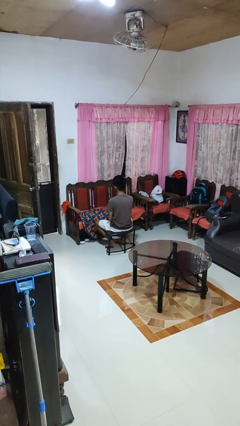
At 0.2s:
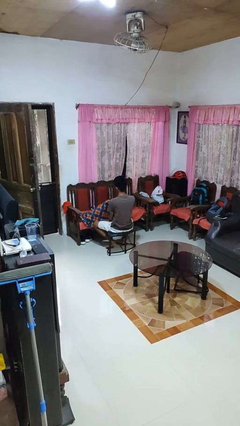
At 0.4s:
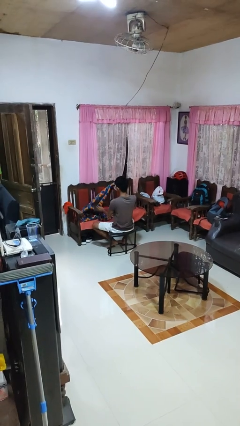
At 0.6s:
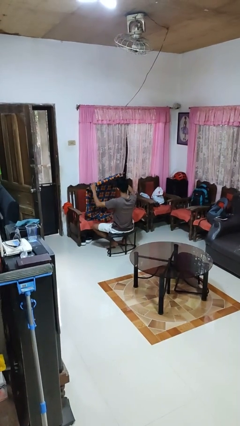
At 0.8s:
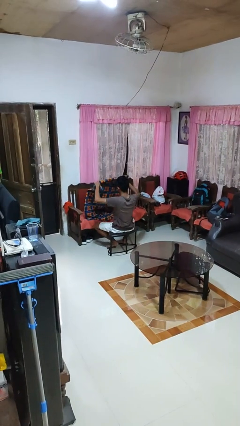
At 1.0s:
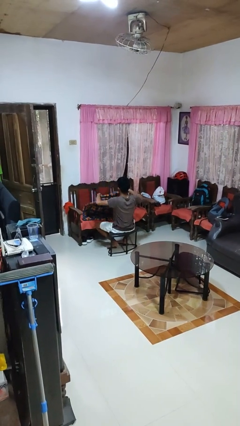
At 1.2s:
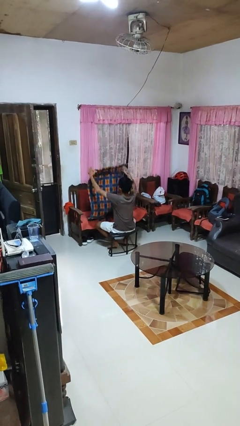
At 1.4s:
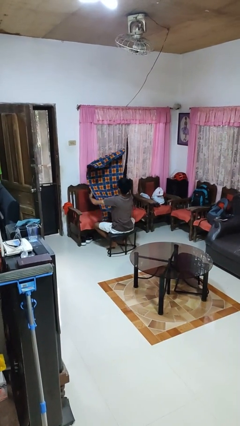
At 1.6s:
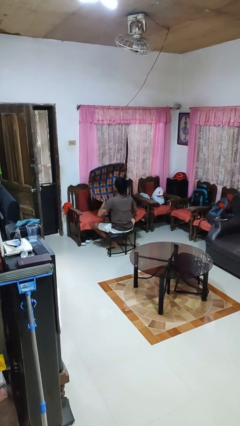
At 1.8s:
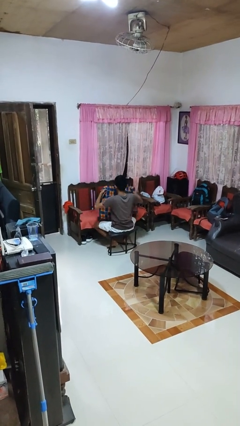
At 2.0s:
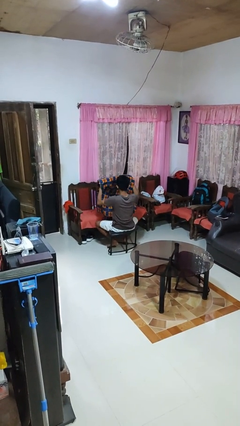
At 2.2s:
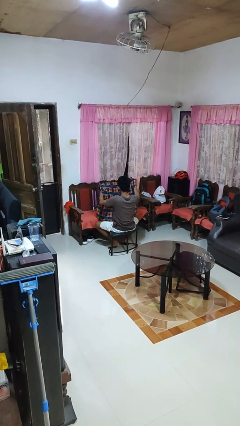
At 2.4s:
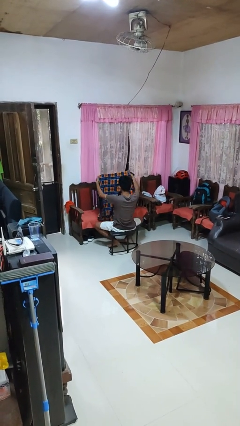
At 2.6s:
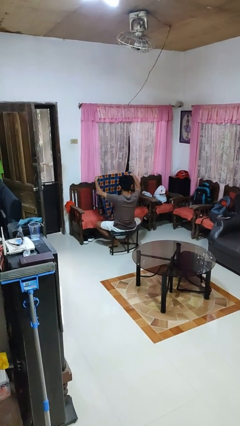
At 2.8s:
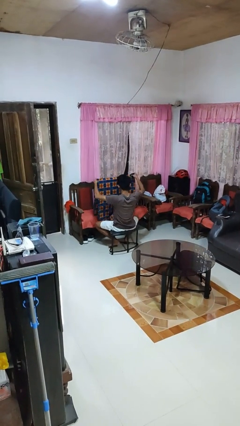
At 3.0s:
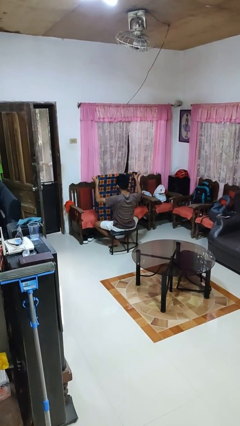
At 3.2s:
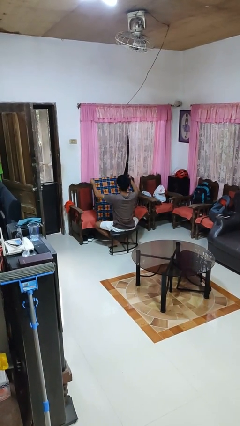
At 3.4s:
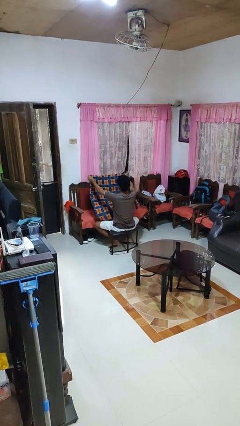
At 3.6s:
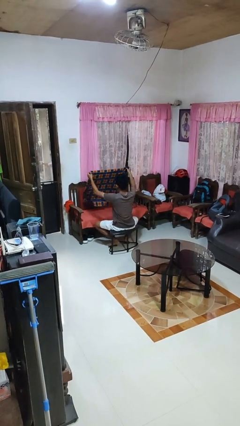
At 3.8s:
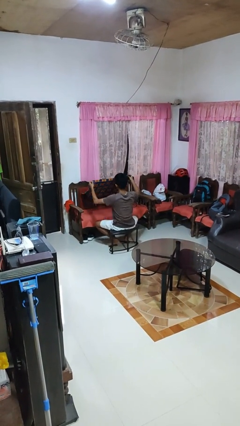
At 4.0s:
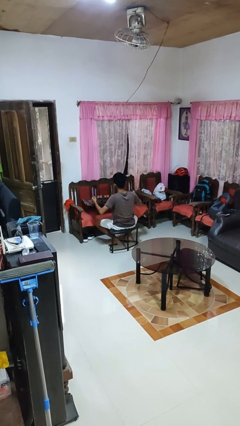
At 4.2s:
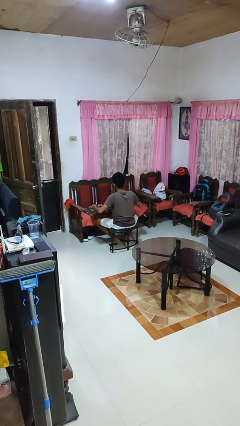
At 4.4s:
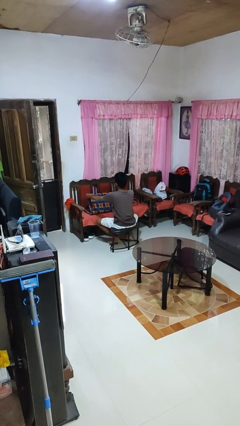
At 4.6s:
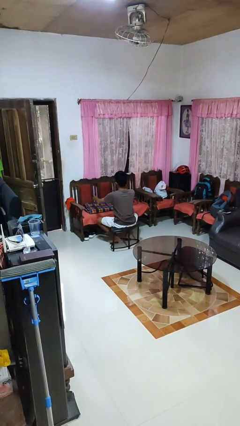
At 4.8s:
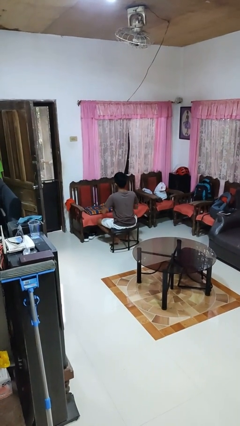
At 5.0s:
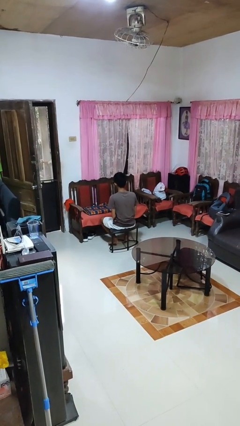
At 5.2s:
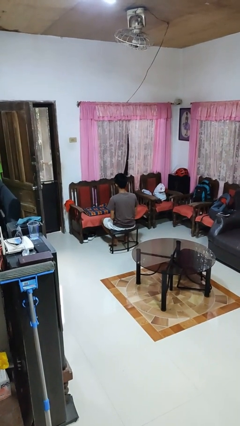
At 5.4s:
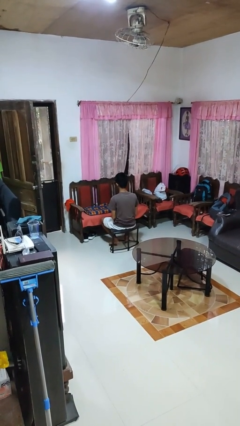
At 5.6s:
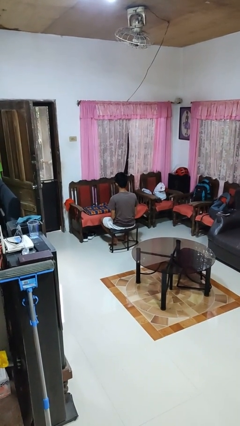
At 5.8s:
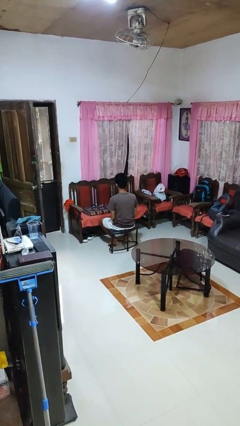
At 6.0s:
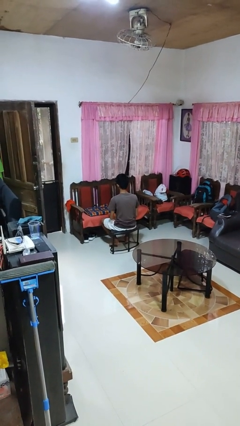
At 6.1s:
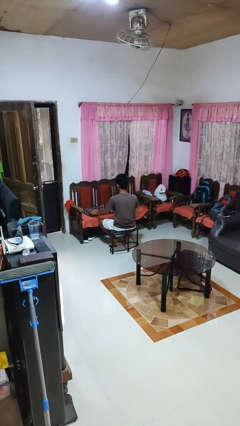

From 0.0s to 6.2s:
person folds blanket

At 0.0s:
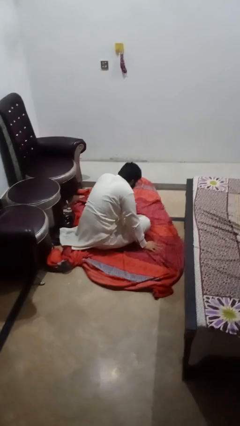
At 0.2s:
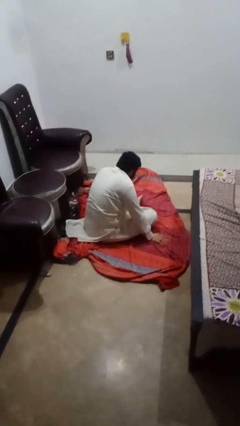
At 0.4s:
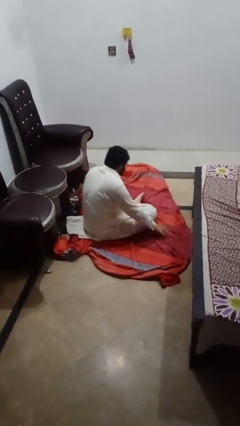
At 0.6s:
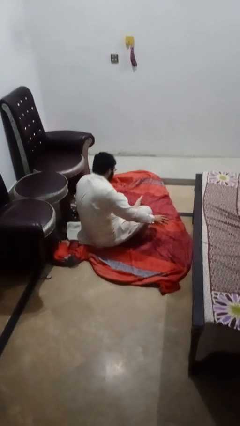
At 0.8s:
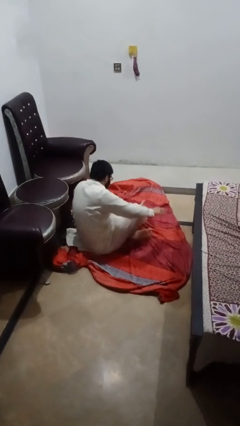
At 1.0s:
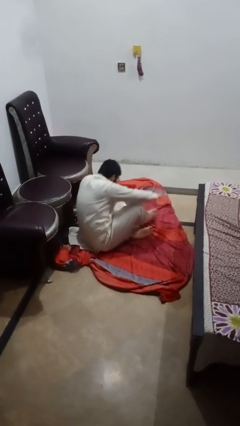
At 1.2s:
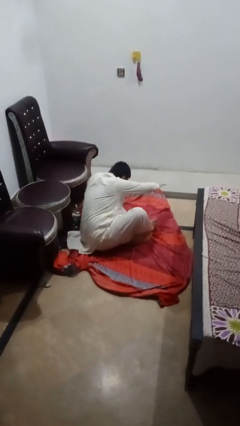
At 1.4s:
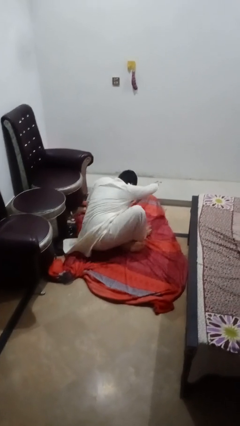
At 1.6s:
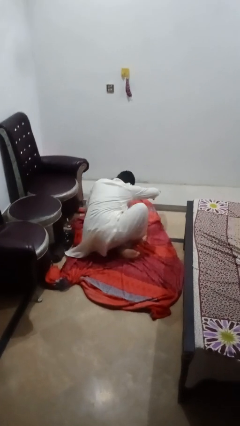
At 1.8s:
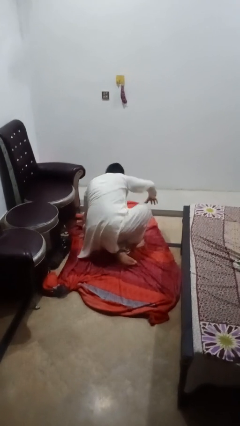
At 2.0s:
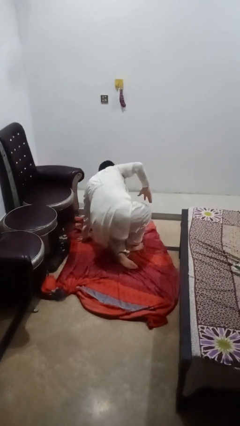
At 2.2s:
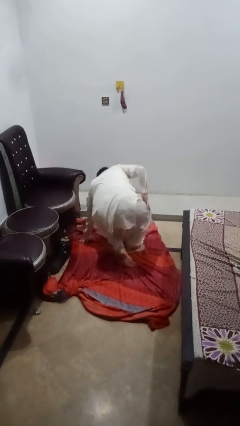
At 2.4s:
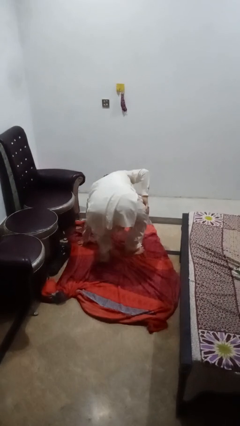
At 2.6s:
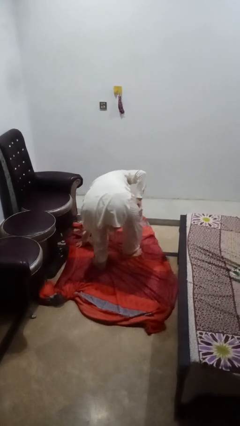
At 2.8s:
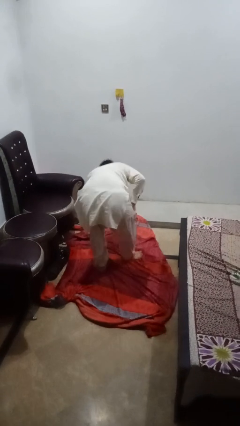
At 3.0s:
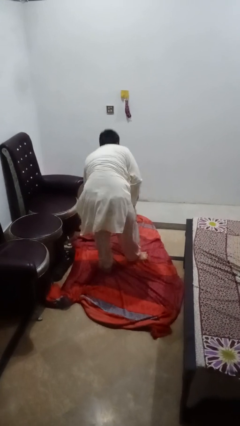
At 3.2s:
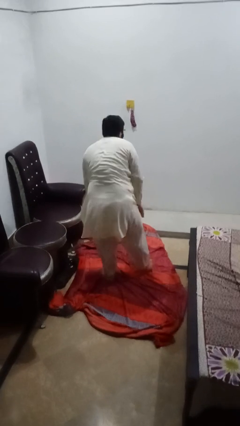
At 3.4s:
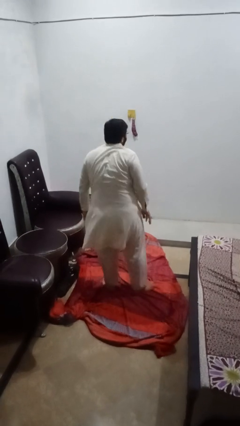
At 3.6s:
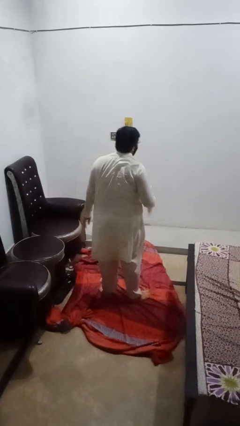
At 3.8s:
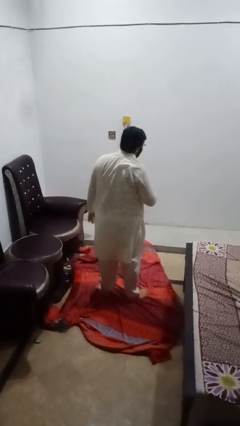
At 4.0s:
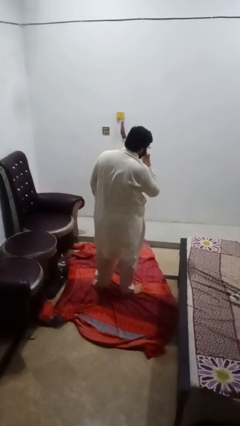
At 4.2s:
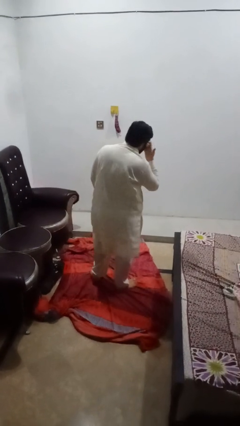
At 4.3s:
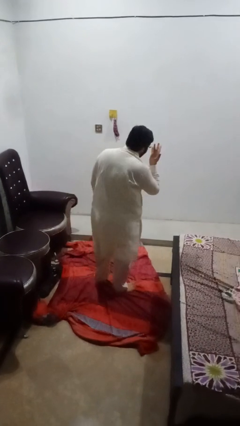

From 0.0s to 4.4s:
person stands up from floor

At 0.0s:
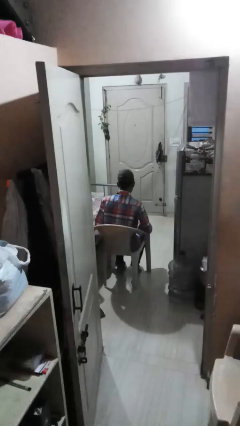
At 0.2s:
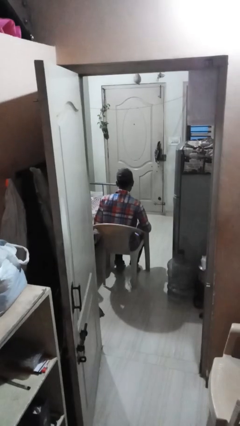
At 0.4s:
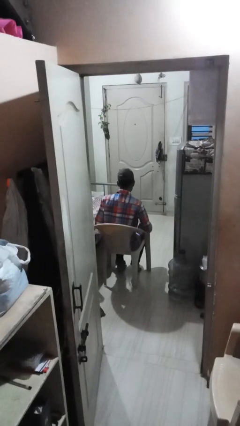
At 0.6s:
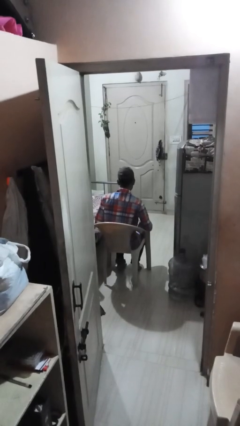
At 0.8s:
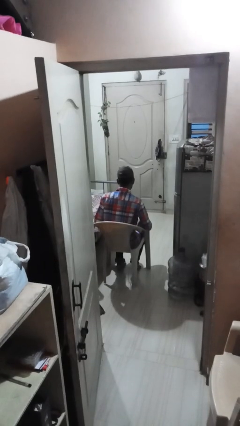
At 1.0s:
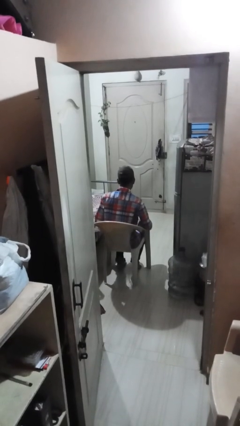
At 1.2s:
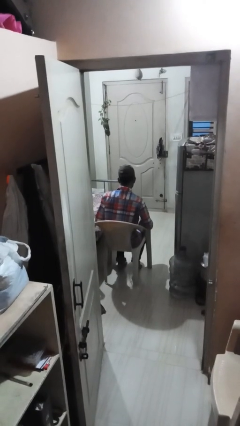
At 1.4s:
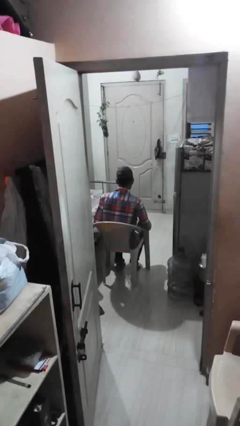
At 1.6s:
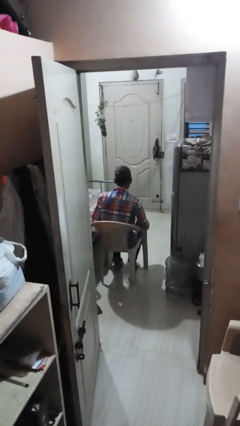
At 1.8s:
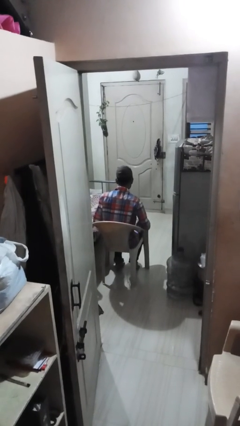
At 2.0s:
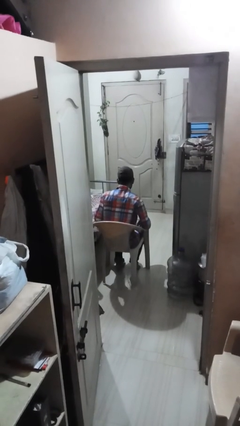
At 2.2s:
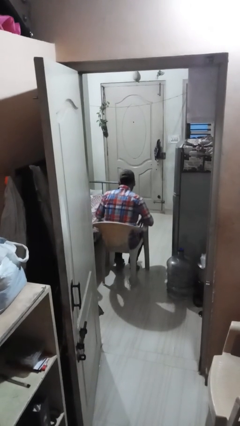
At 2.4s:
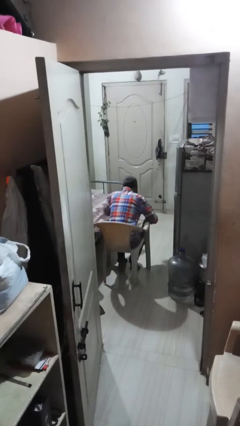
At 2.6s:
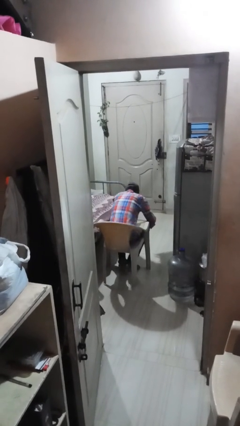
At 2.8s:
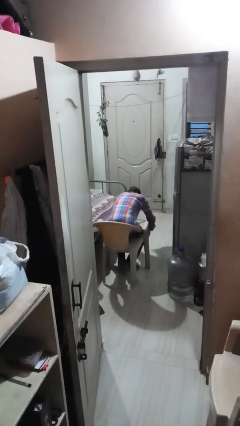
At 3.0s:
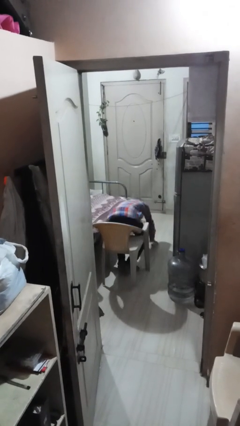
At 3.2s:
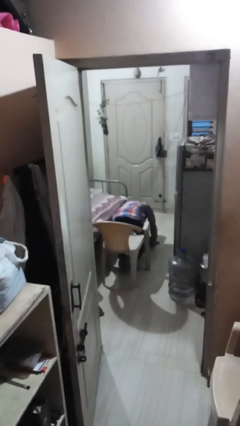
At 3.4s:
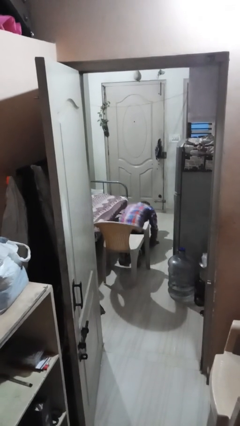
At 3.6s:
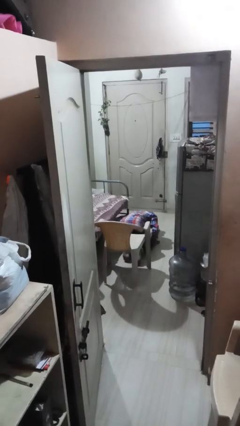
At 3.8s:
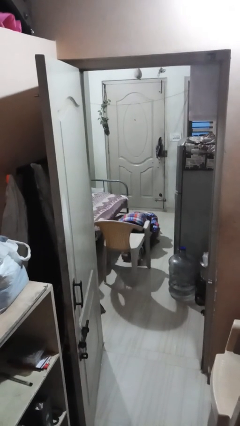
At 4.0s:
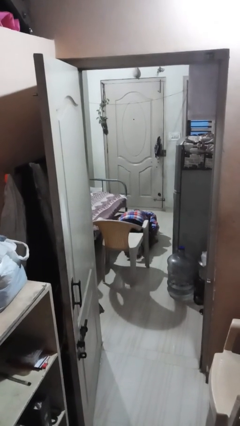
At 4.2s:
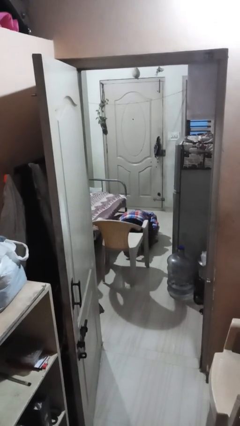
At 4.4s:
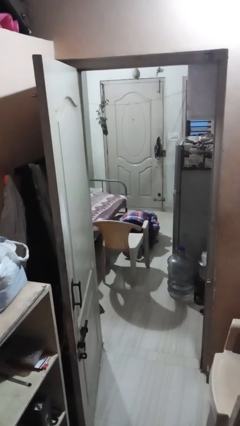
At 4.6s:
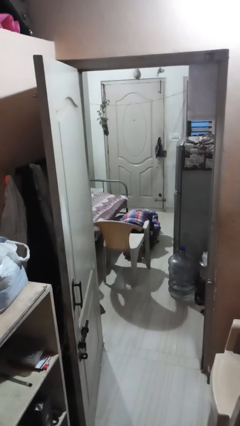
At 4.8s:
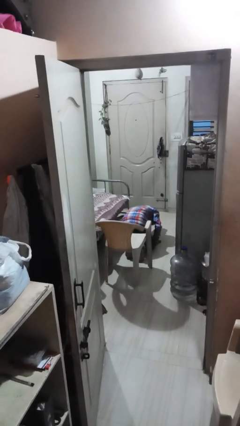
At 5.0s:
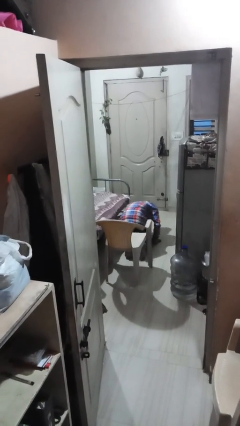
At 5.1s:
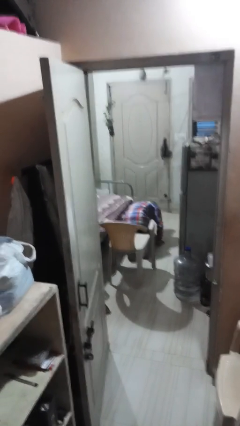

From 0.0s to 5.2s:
person falls from chair

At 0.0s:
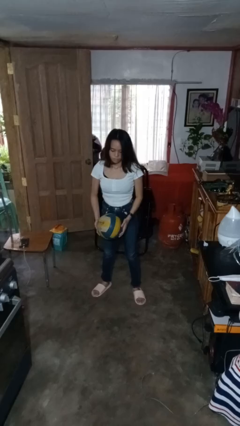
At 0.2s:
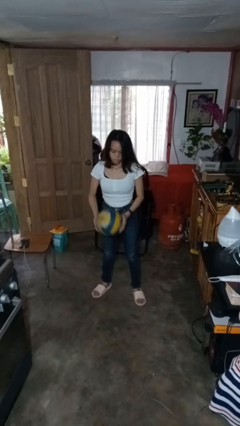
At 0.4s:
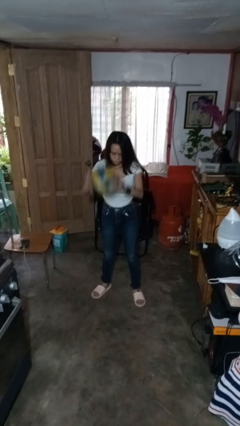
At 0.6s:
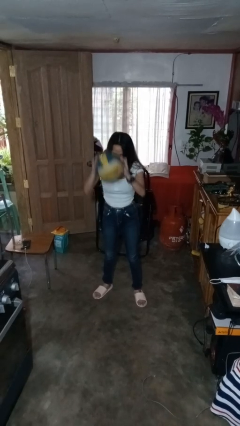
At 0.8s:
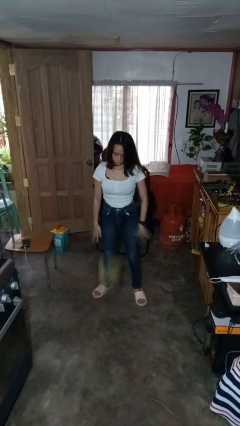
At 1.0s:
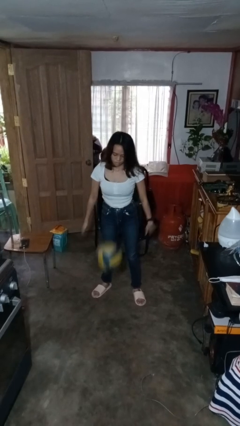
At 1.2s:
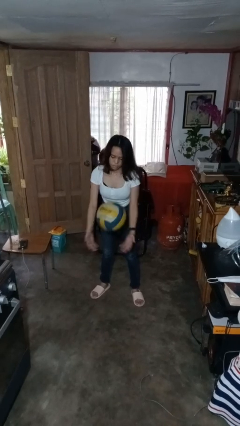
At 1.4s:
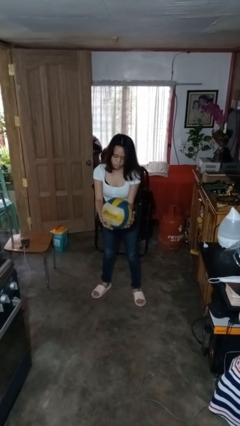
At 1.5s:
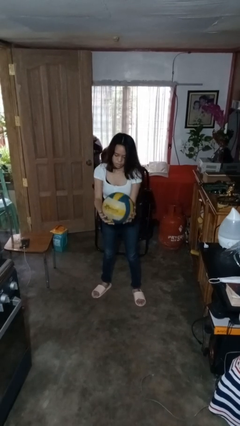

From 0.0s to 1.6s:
person bounces ball on floor

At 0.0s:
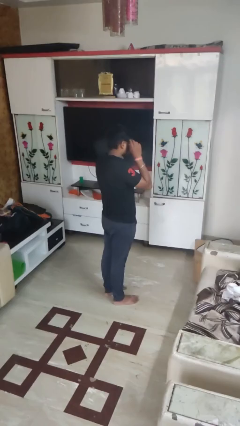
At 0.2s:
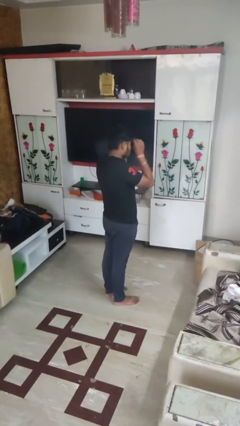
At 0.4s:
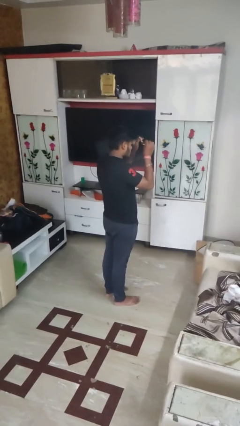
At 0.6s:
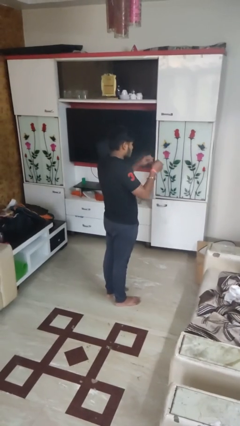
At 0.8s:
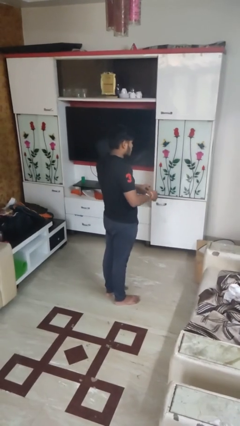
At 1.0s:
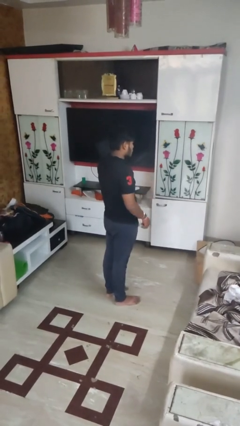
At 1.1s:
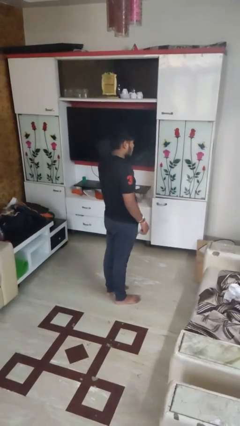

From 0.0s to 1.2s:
person takes off glasses
